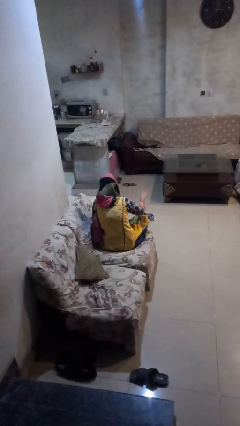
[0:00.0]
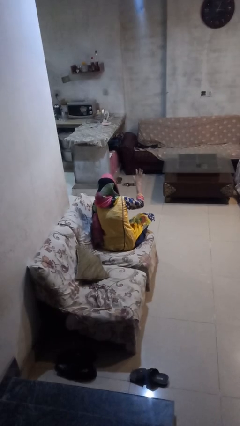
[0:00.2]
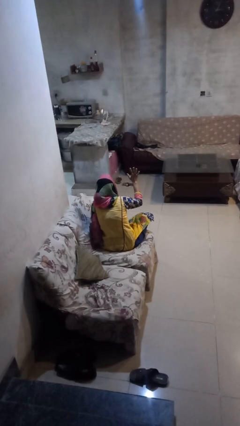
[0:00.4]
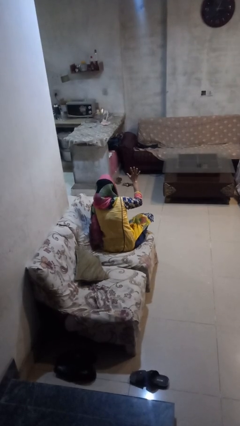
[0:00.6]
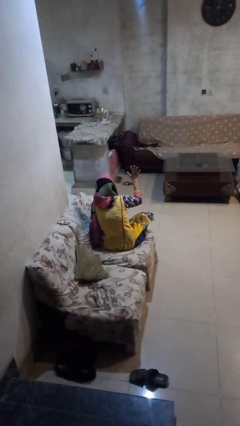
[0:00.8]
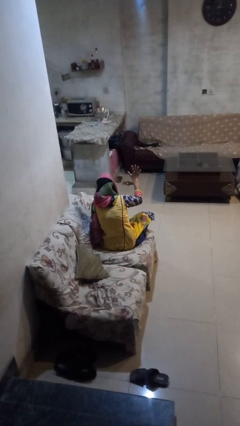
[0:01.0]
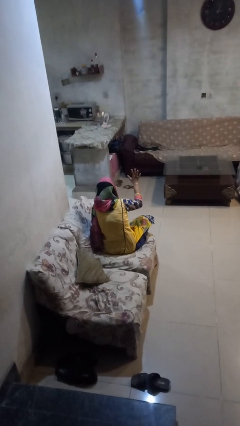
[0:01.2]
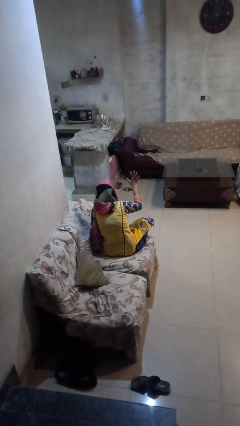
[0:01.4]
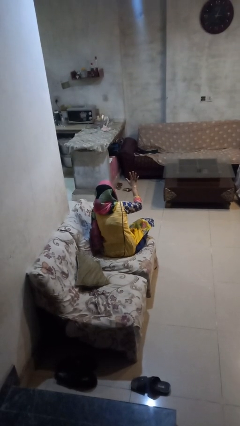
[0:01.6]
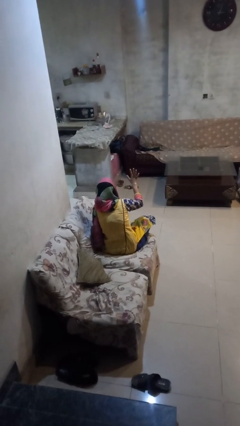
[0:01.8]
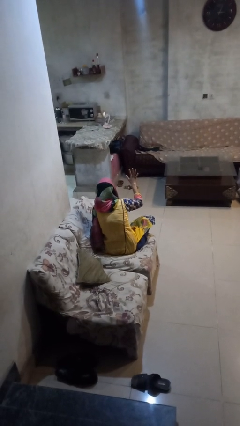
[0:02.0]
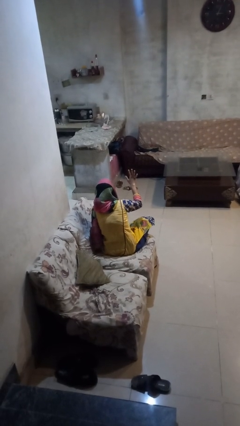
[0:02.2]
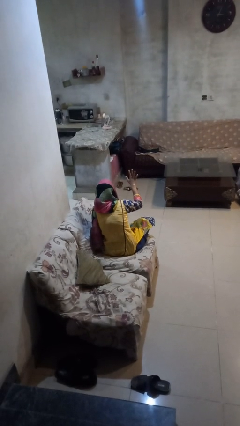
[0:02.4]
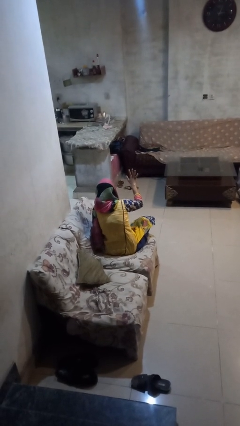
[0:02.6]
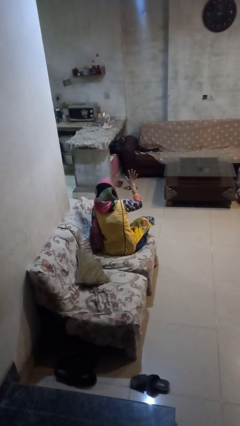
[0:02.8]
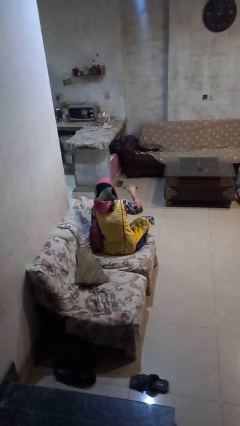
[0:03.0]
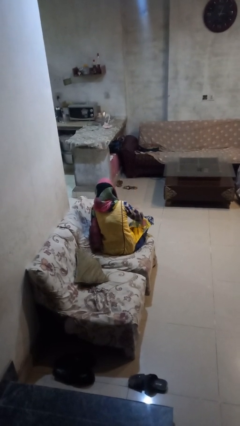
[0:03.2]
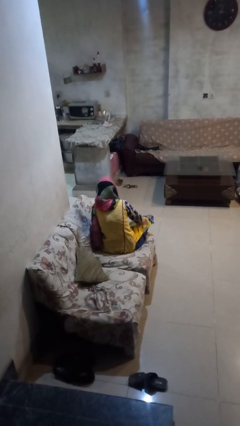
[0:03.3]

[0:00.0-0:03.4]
person gestures number five

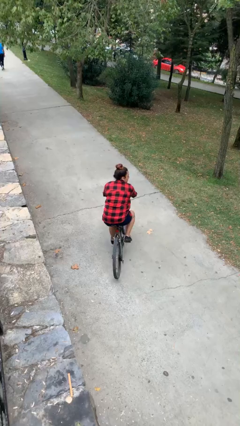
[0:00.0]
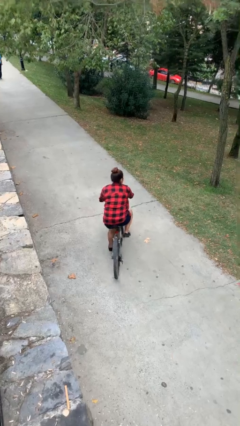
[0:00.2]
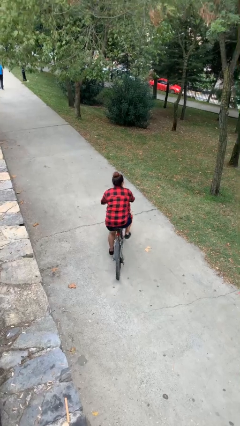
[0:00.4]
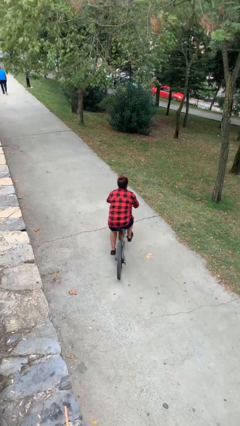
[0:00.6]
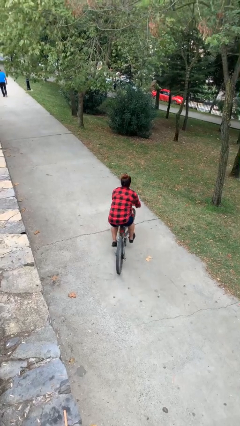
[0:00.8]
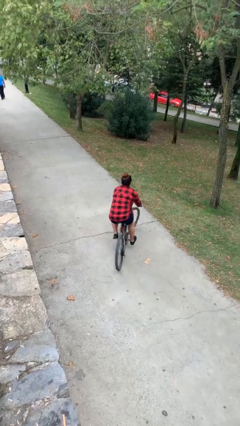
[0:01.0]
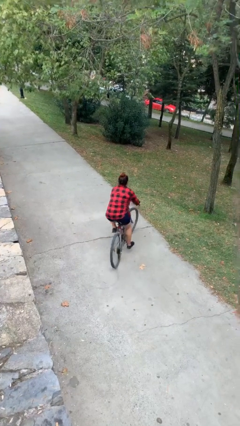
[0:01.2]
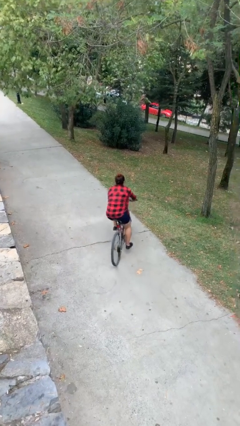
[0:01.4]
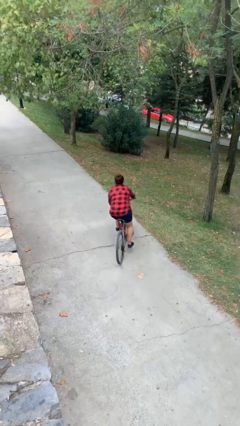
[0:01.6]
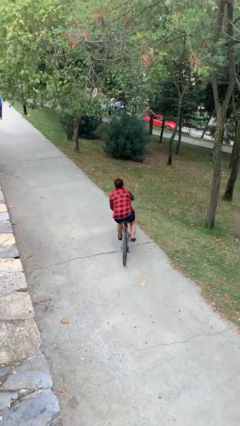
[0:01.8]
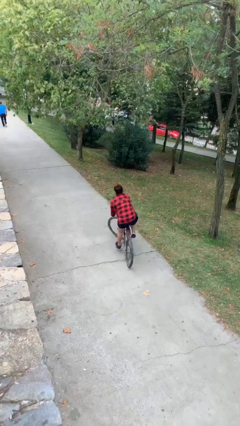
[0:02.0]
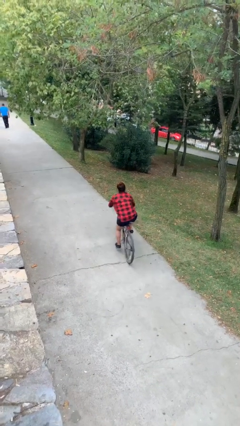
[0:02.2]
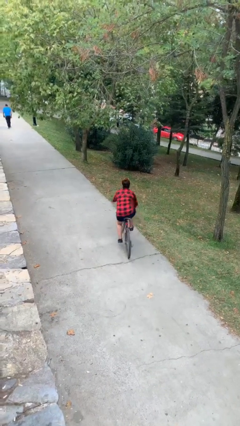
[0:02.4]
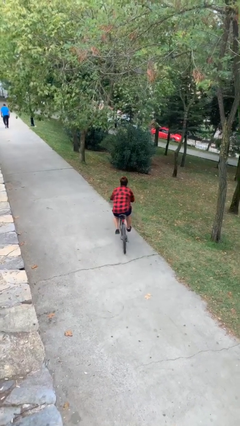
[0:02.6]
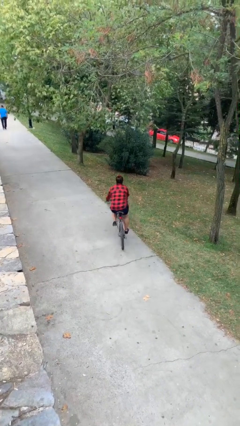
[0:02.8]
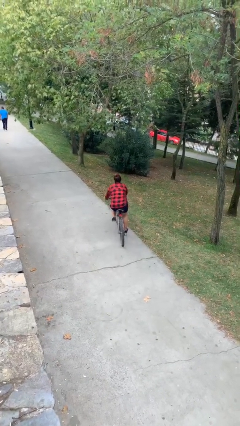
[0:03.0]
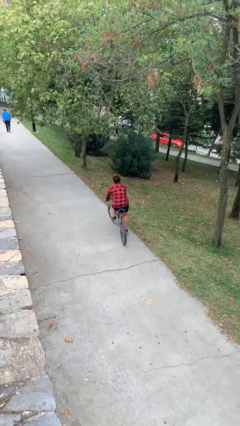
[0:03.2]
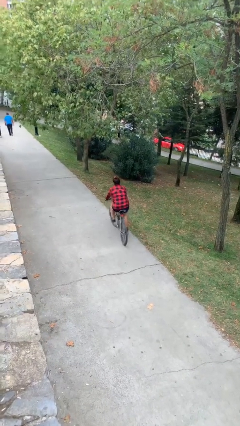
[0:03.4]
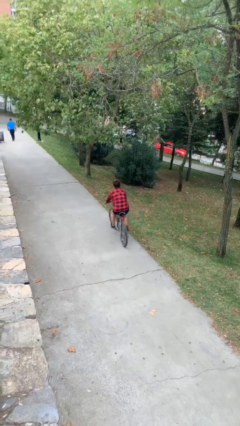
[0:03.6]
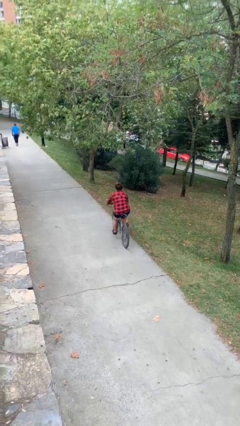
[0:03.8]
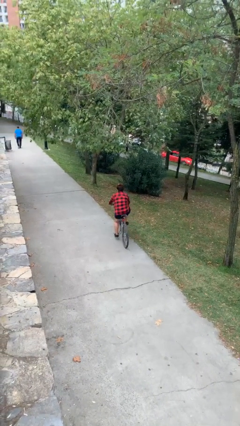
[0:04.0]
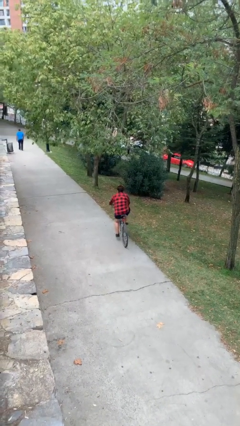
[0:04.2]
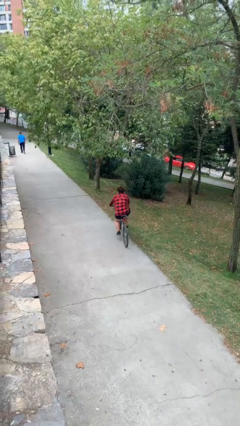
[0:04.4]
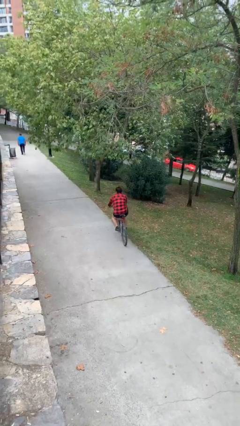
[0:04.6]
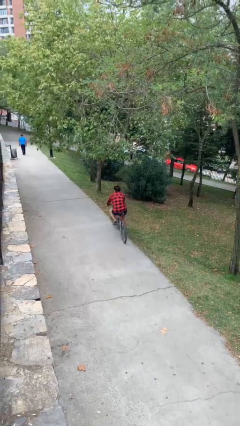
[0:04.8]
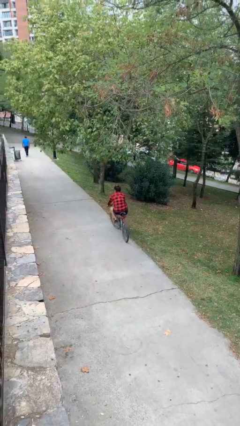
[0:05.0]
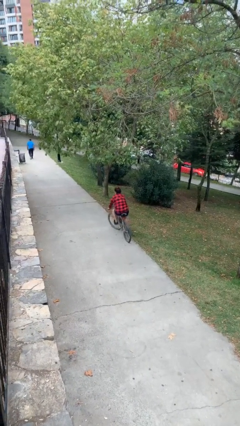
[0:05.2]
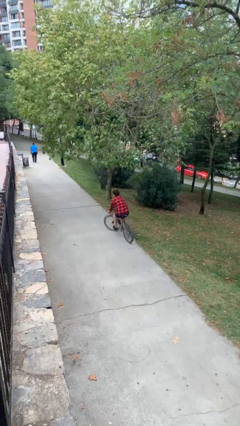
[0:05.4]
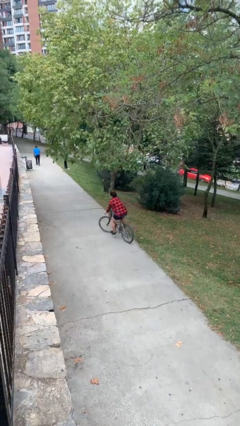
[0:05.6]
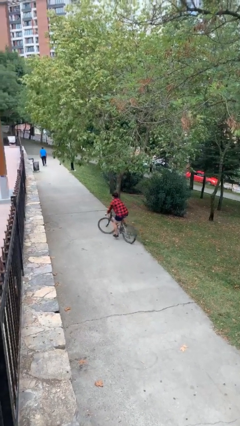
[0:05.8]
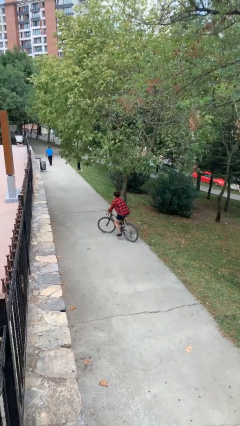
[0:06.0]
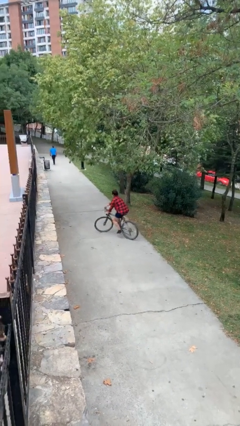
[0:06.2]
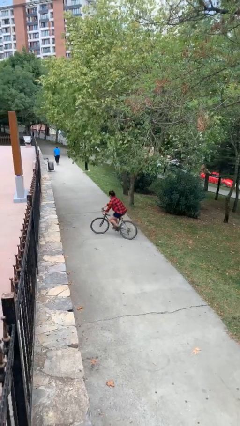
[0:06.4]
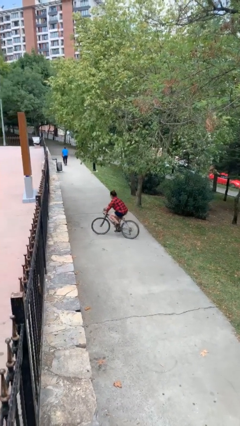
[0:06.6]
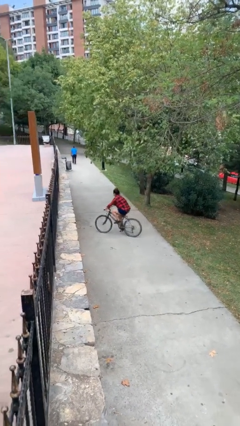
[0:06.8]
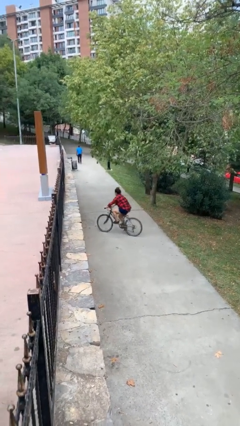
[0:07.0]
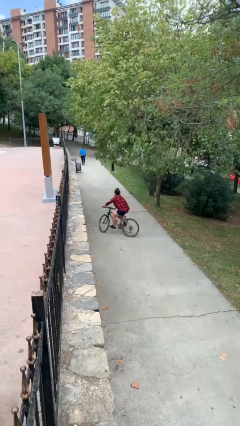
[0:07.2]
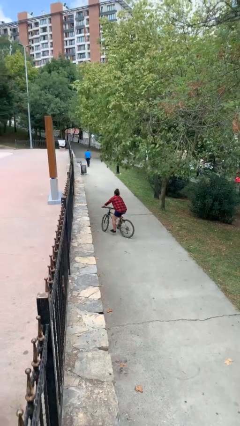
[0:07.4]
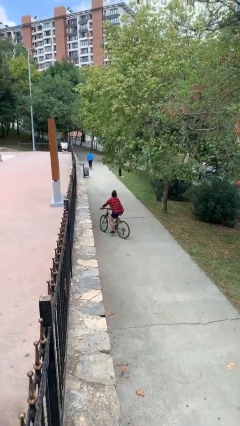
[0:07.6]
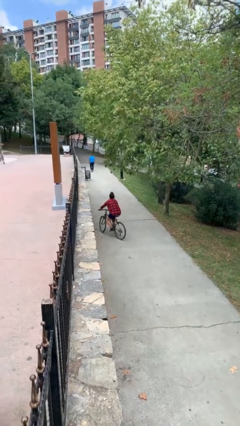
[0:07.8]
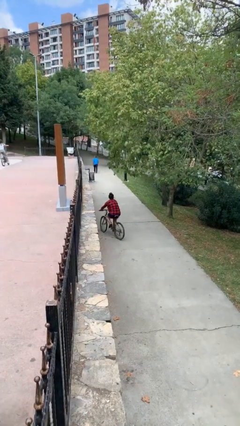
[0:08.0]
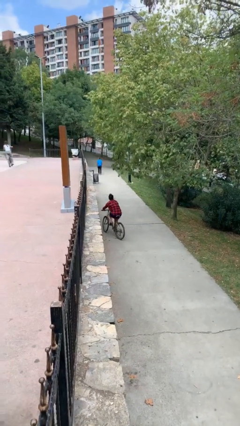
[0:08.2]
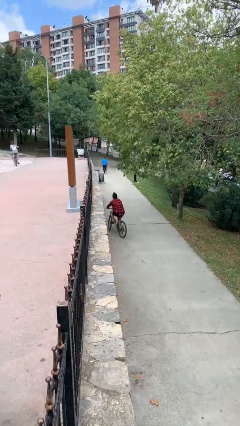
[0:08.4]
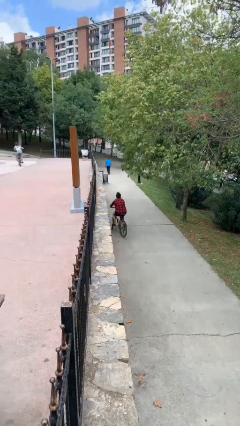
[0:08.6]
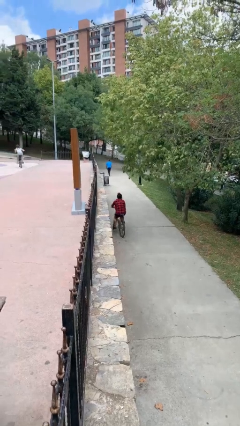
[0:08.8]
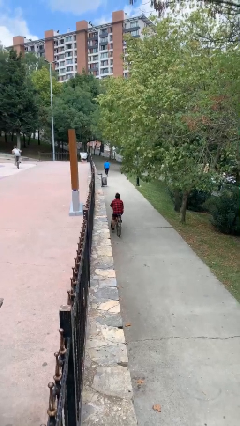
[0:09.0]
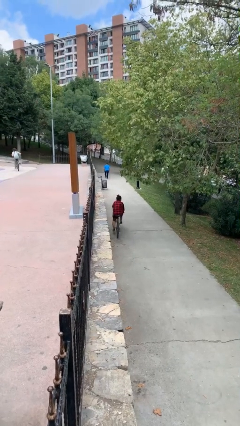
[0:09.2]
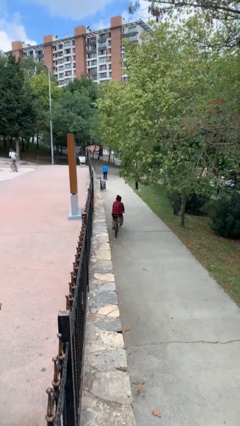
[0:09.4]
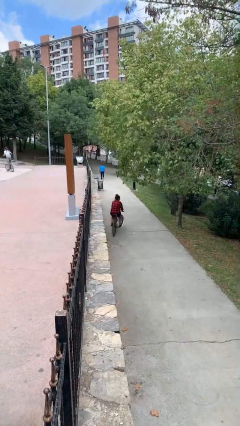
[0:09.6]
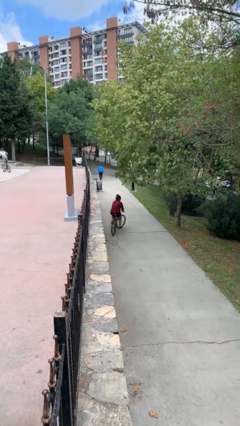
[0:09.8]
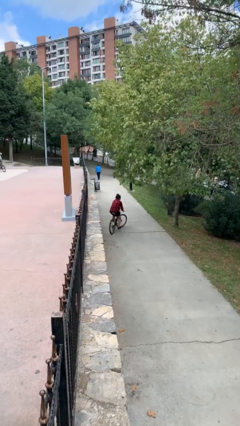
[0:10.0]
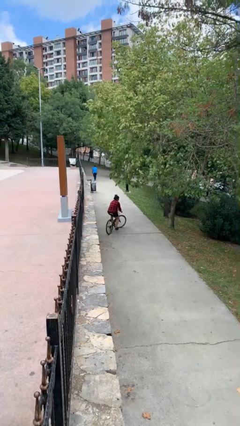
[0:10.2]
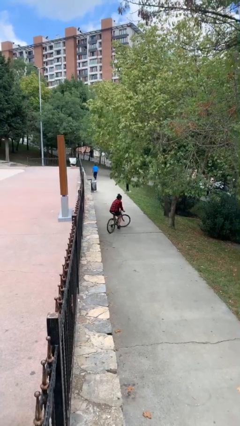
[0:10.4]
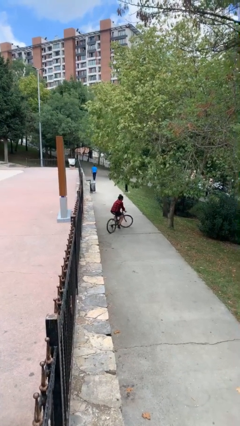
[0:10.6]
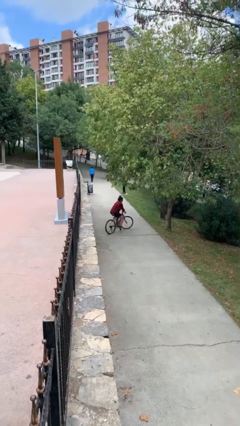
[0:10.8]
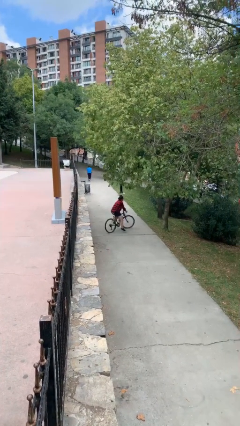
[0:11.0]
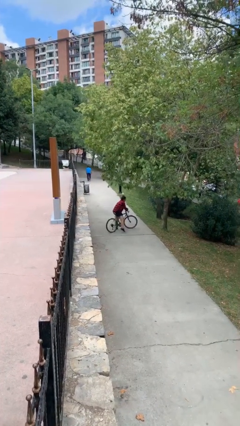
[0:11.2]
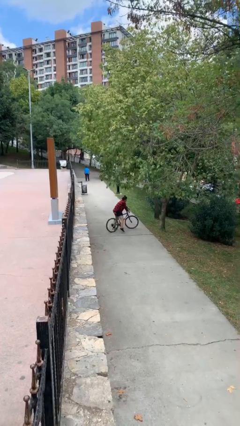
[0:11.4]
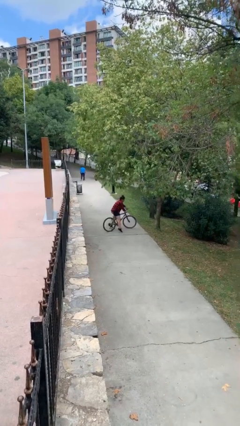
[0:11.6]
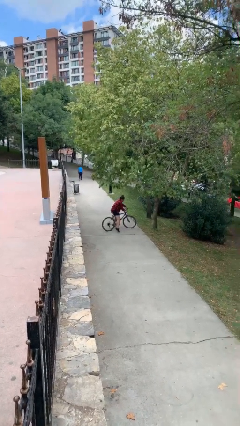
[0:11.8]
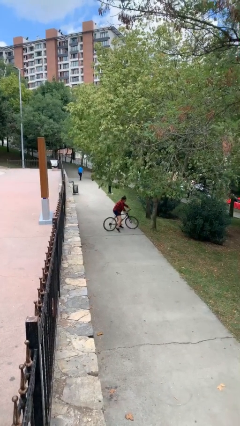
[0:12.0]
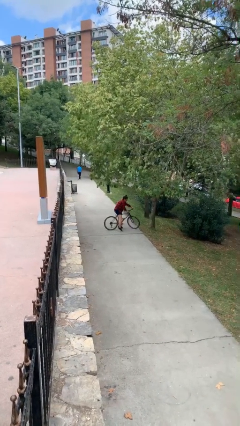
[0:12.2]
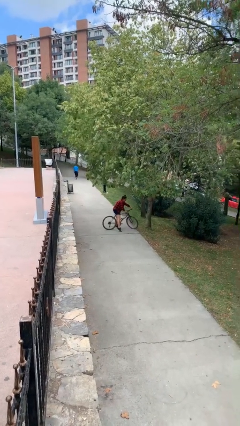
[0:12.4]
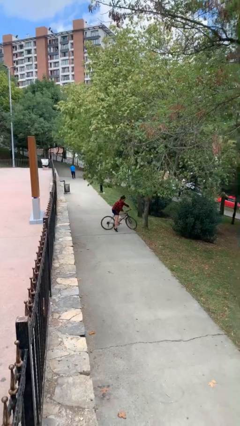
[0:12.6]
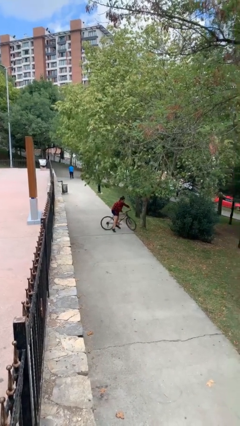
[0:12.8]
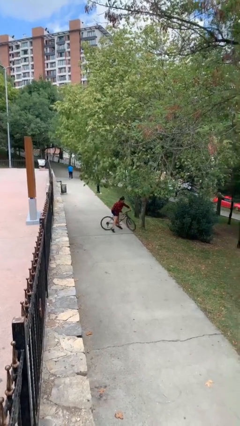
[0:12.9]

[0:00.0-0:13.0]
person rides bicycle

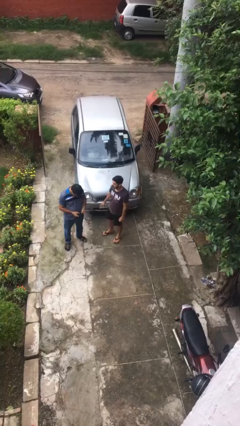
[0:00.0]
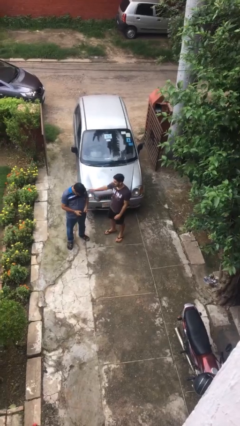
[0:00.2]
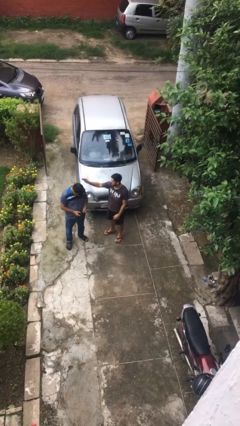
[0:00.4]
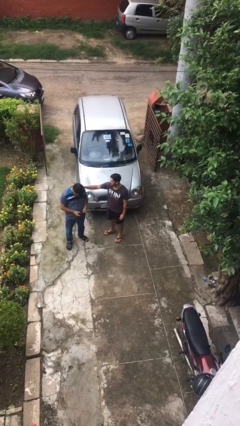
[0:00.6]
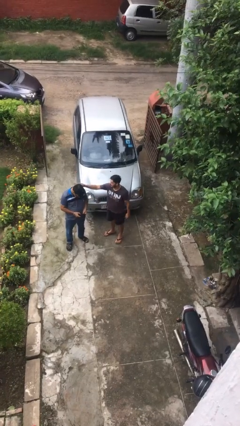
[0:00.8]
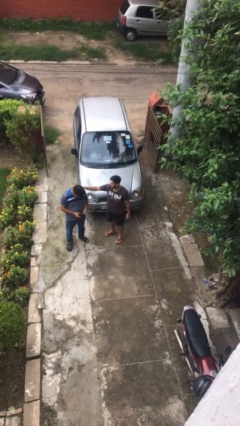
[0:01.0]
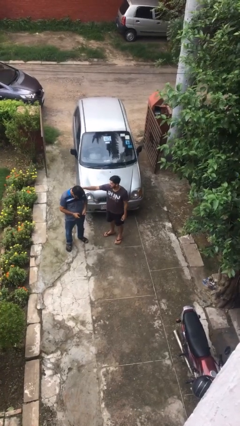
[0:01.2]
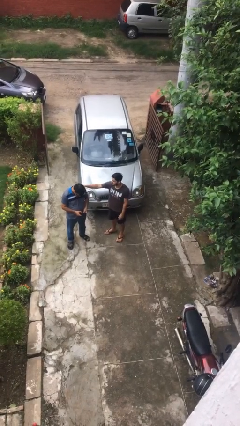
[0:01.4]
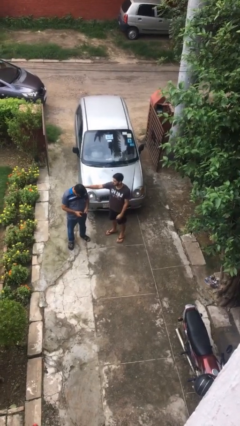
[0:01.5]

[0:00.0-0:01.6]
person pounds shoulders of person
